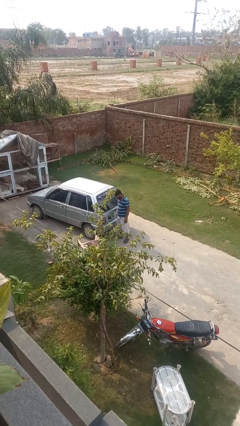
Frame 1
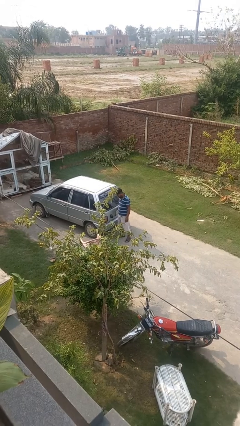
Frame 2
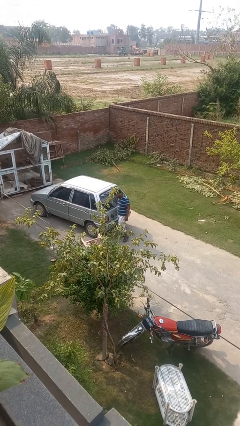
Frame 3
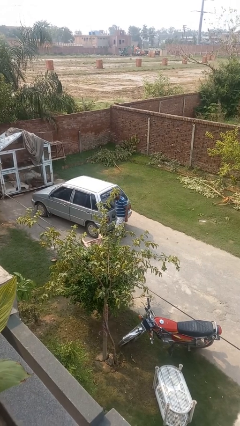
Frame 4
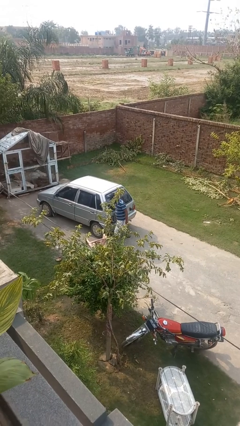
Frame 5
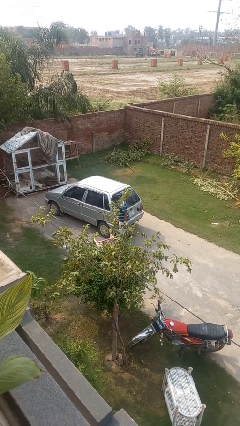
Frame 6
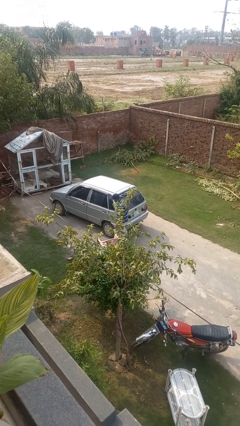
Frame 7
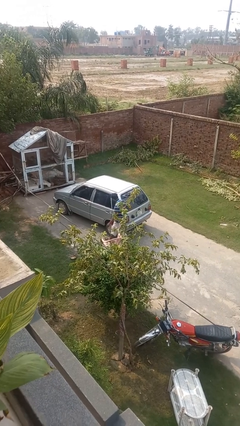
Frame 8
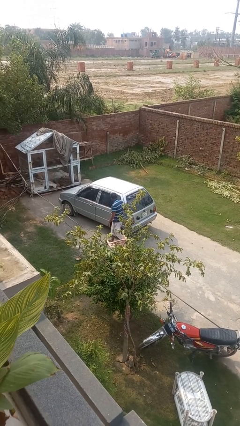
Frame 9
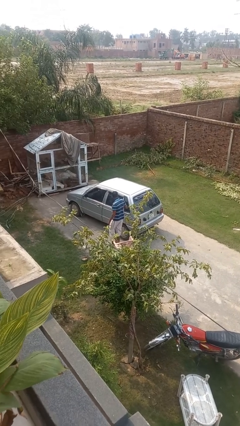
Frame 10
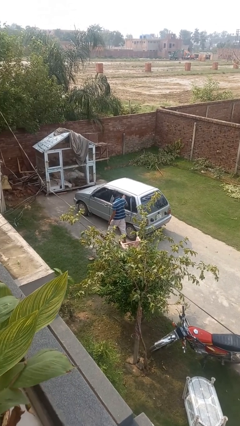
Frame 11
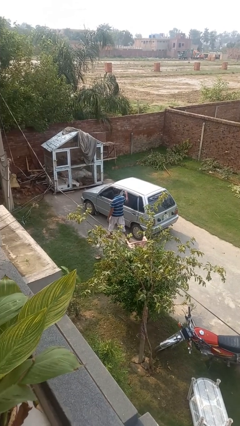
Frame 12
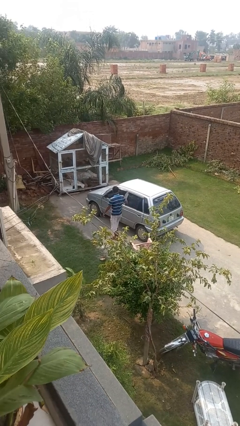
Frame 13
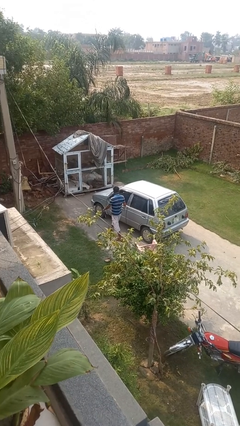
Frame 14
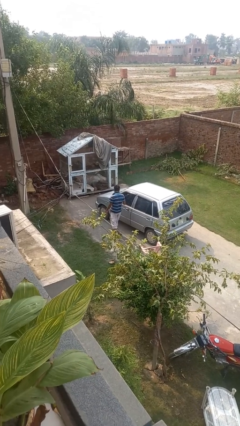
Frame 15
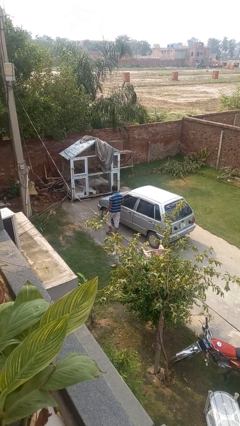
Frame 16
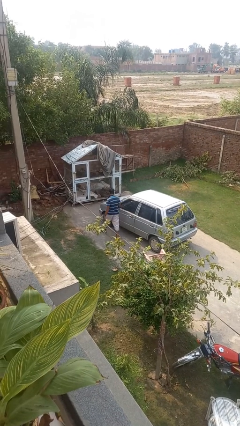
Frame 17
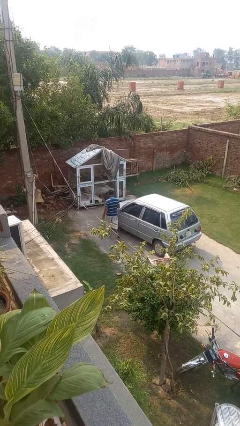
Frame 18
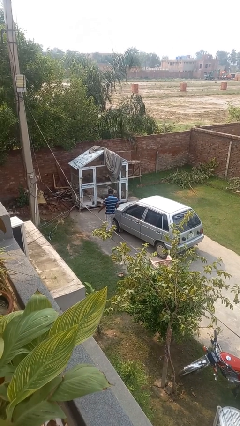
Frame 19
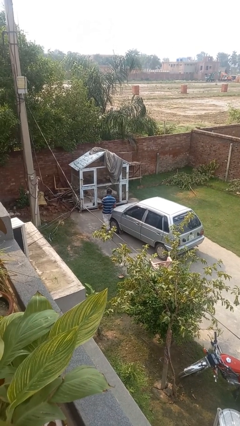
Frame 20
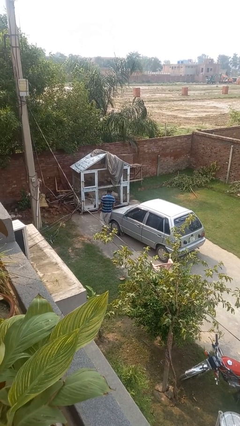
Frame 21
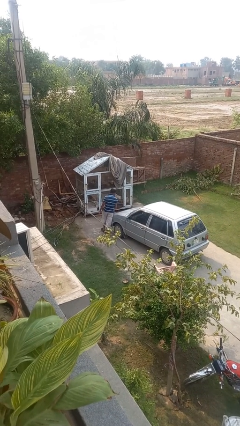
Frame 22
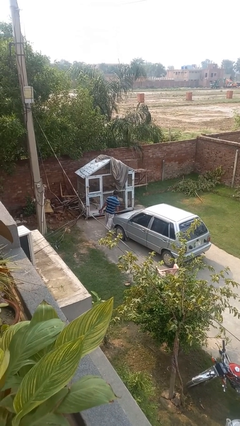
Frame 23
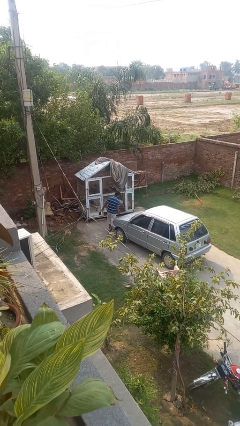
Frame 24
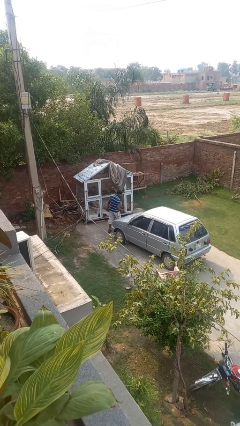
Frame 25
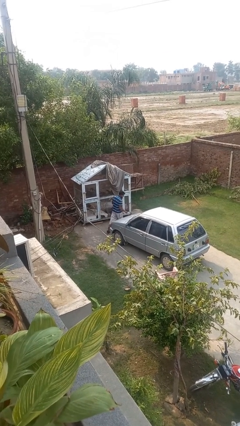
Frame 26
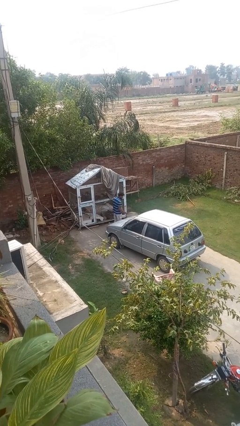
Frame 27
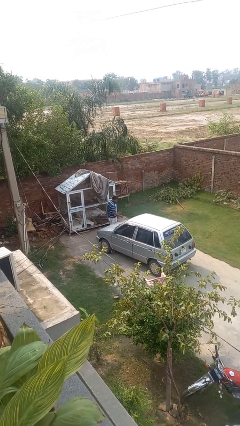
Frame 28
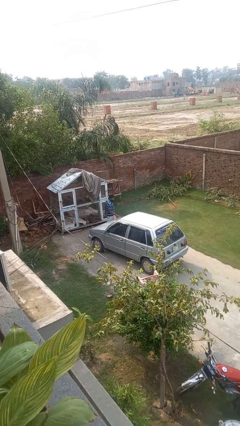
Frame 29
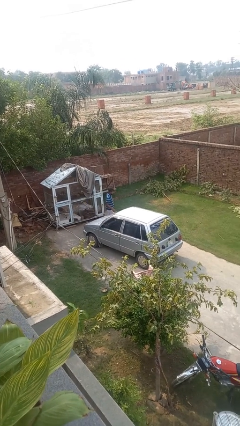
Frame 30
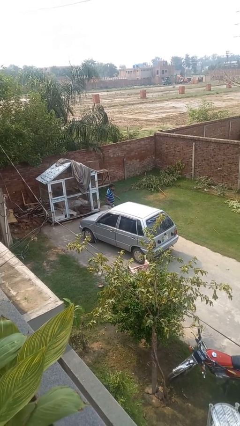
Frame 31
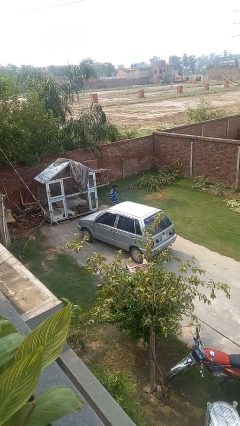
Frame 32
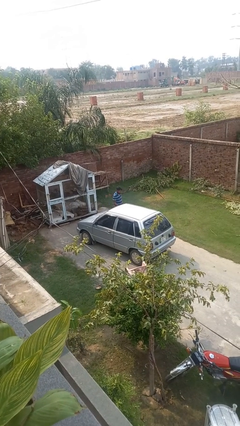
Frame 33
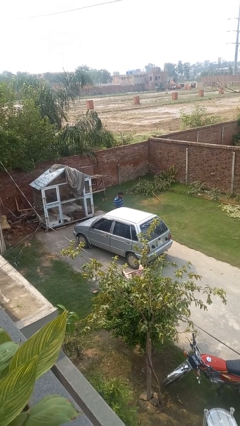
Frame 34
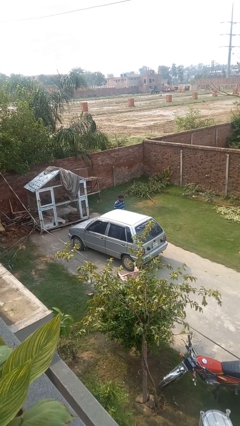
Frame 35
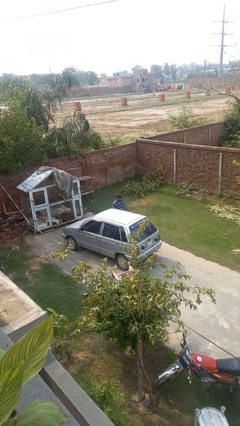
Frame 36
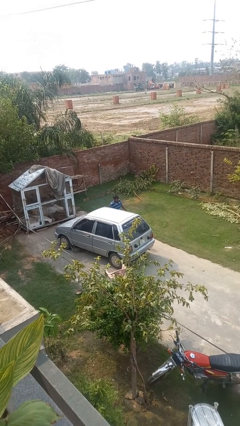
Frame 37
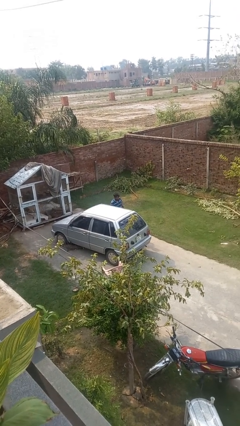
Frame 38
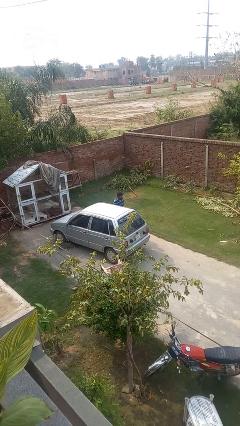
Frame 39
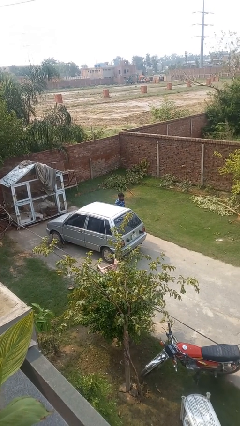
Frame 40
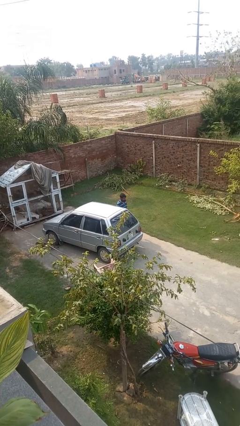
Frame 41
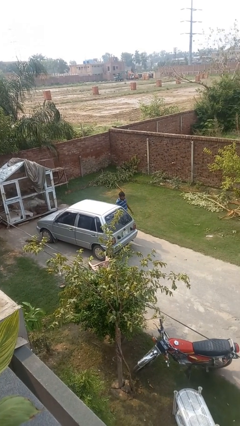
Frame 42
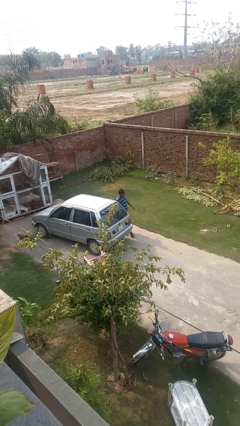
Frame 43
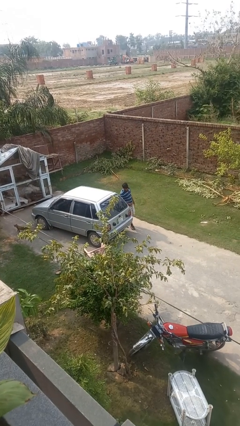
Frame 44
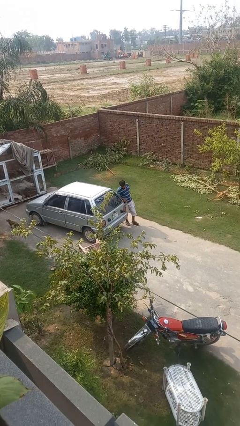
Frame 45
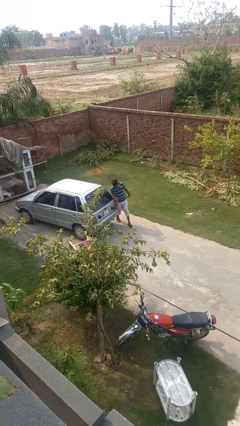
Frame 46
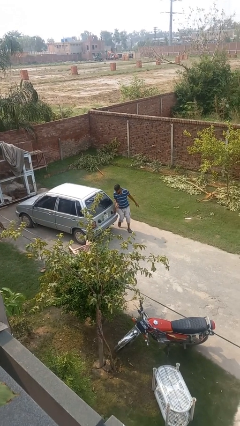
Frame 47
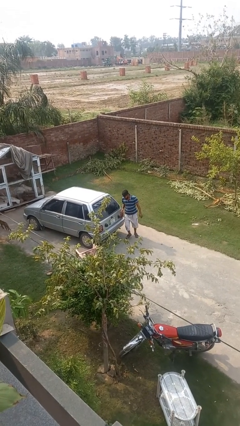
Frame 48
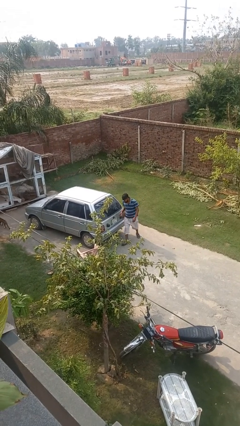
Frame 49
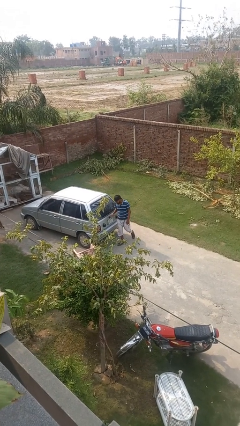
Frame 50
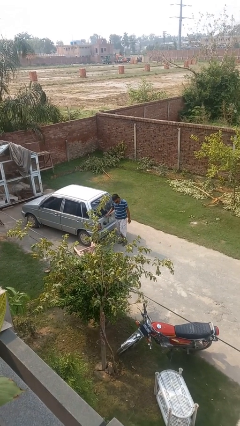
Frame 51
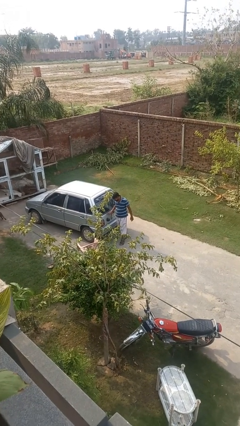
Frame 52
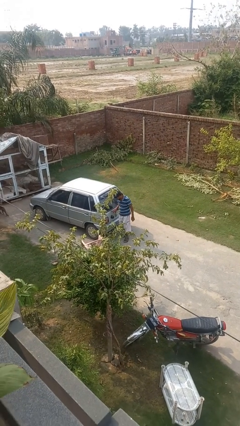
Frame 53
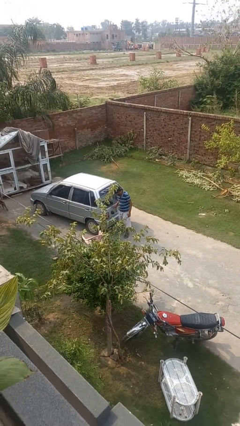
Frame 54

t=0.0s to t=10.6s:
person walks around car

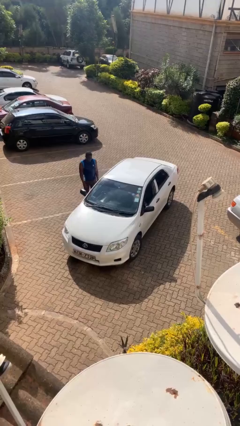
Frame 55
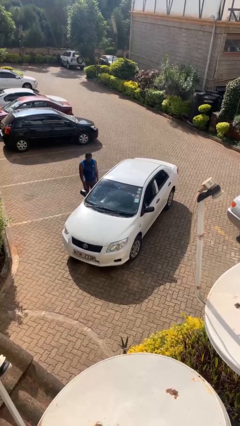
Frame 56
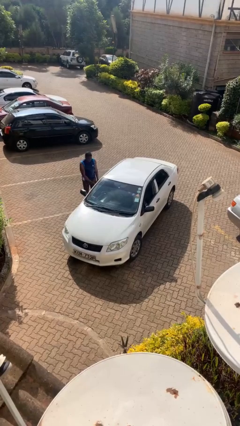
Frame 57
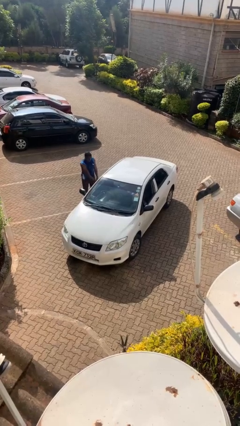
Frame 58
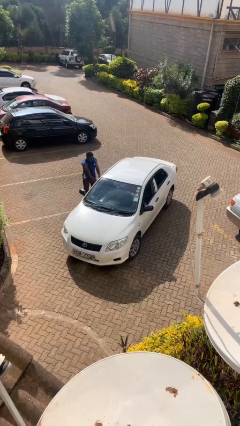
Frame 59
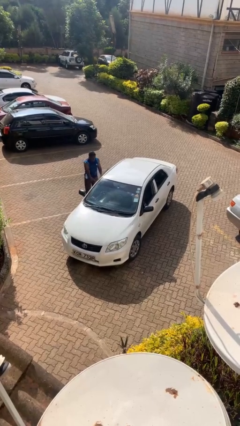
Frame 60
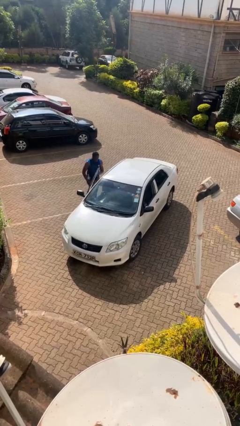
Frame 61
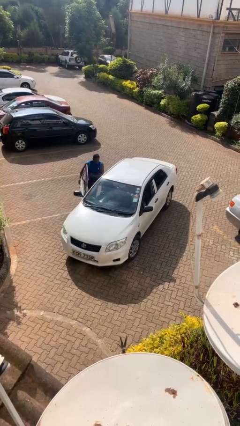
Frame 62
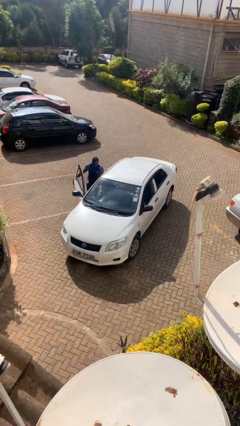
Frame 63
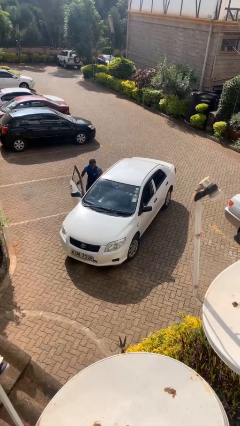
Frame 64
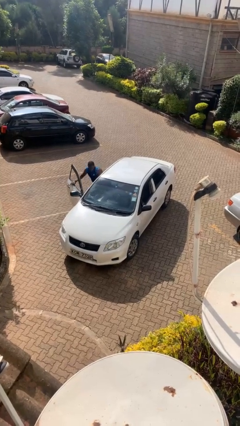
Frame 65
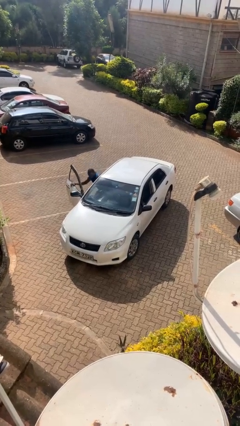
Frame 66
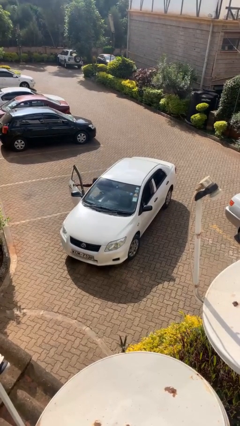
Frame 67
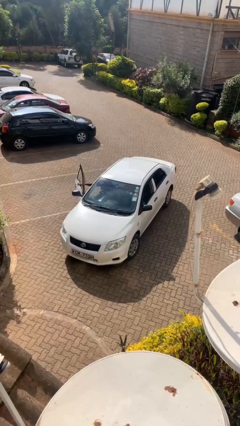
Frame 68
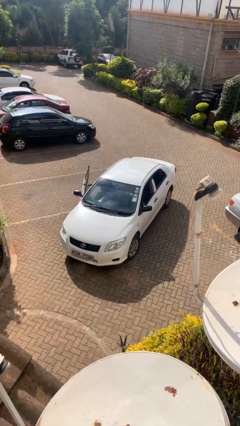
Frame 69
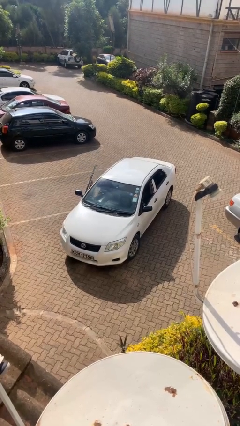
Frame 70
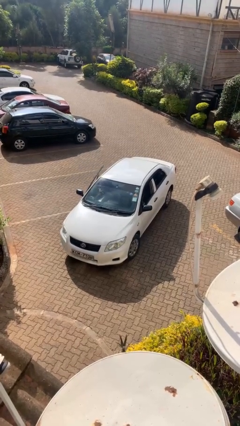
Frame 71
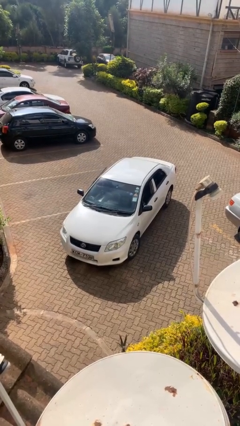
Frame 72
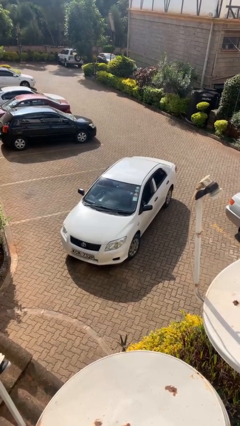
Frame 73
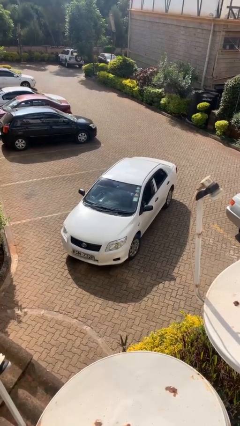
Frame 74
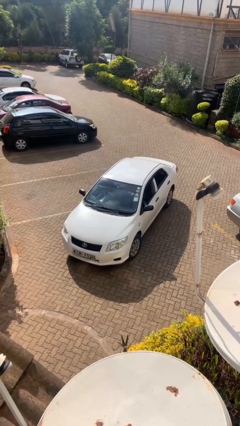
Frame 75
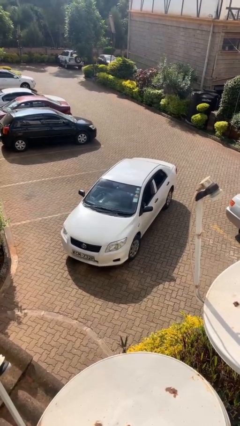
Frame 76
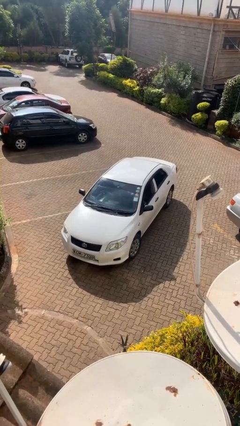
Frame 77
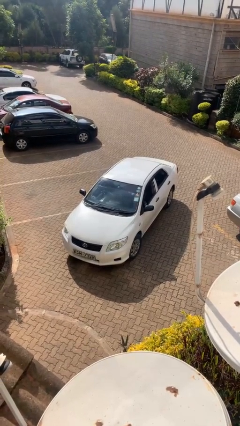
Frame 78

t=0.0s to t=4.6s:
car picks up person

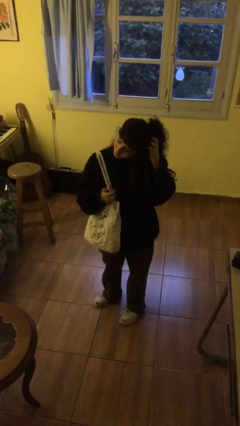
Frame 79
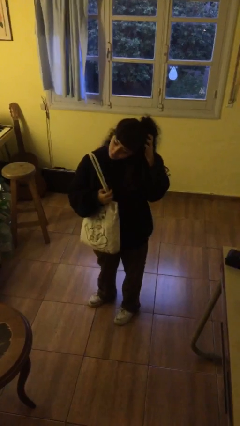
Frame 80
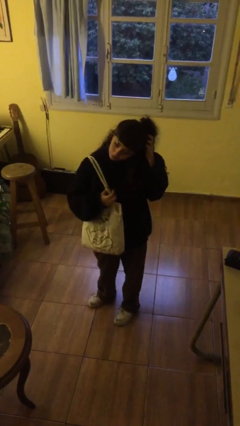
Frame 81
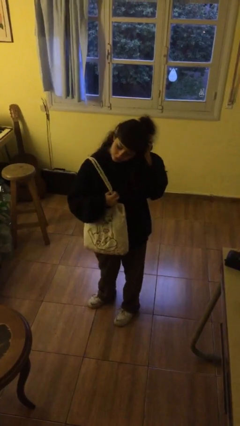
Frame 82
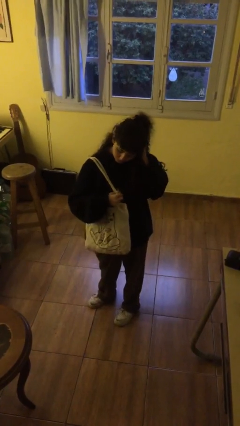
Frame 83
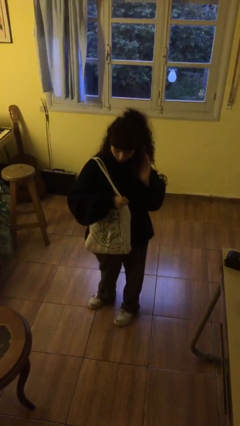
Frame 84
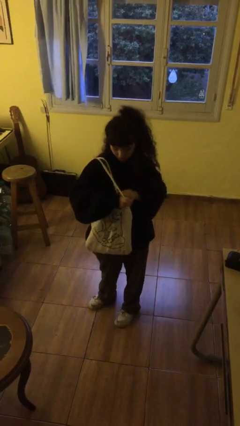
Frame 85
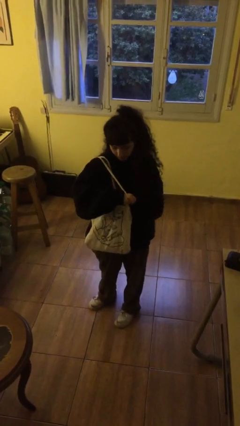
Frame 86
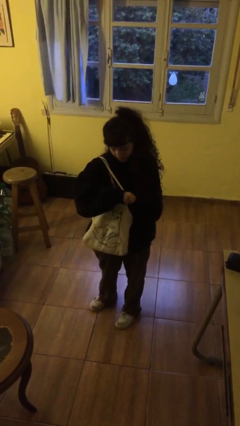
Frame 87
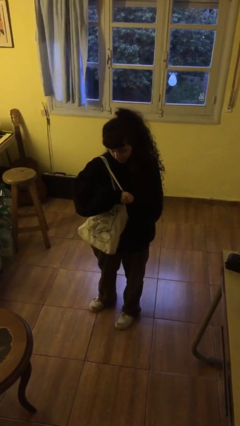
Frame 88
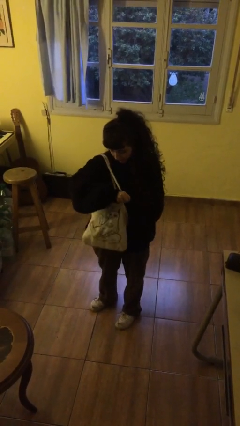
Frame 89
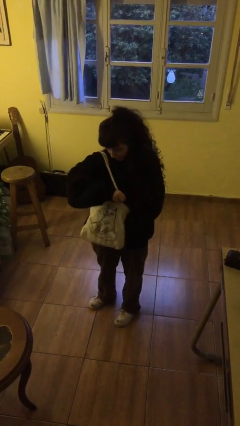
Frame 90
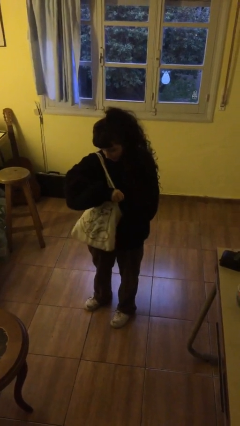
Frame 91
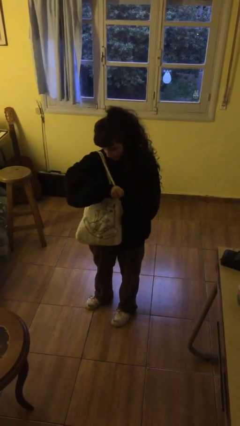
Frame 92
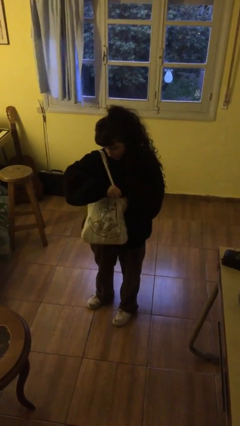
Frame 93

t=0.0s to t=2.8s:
person searches in purse
